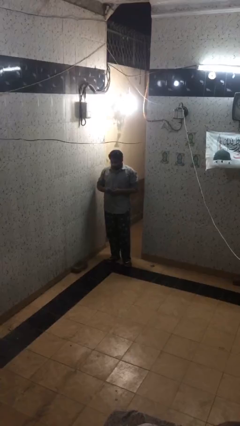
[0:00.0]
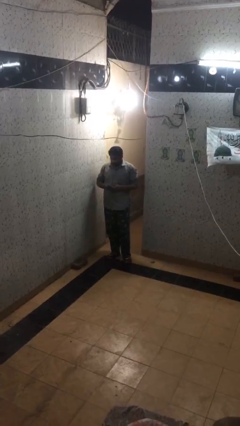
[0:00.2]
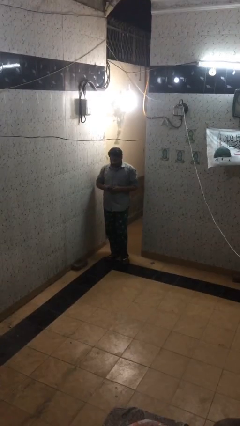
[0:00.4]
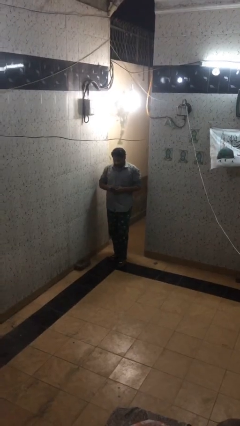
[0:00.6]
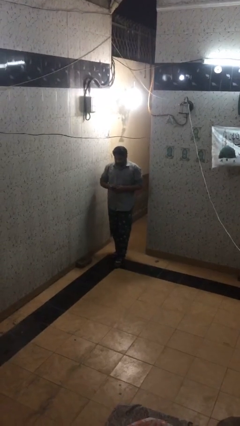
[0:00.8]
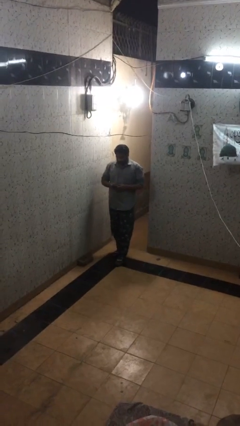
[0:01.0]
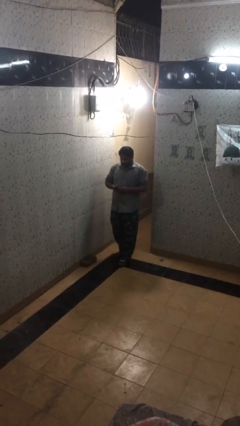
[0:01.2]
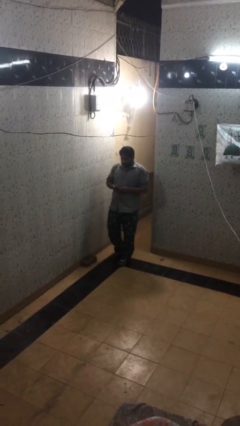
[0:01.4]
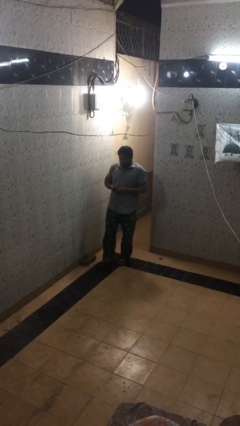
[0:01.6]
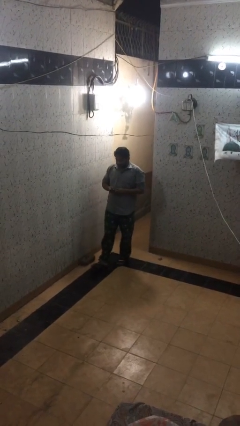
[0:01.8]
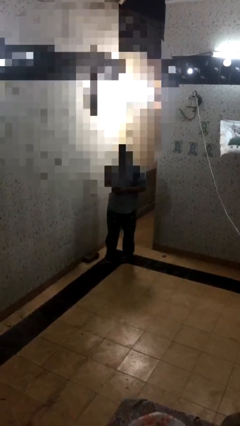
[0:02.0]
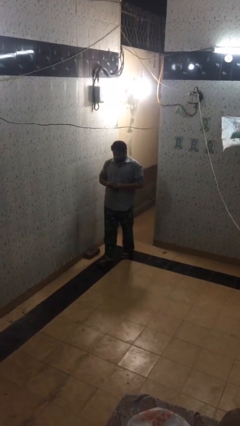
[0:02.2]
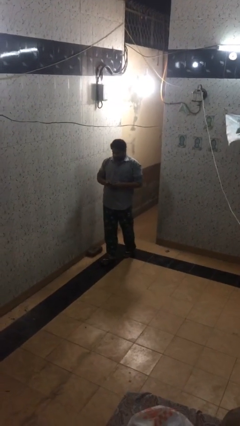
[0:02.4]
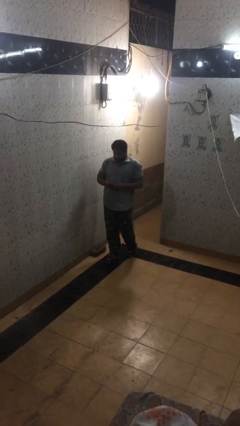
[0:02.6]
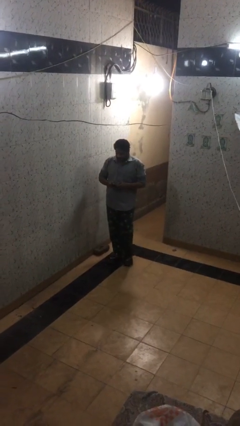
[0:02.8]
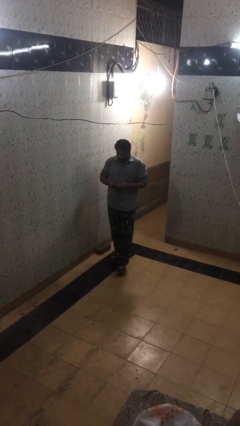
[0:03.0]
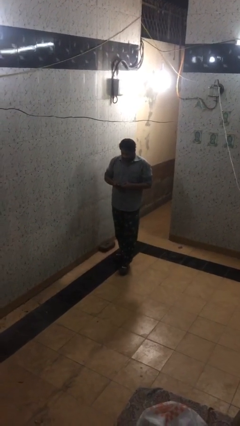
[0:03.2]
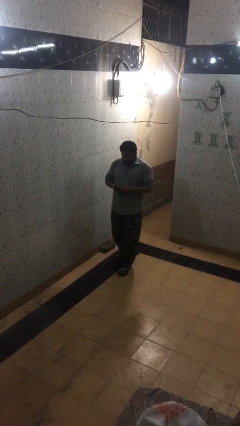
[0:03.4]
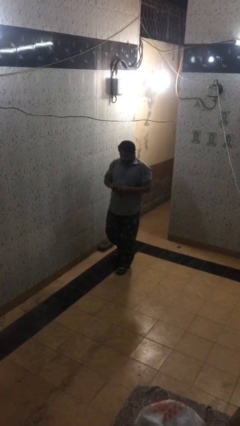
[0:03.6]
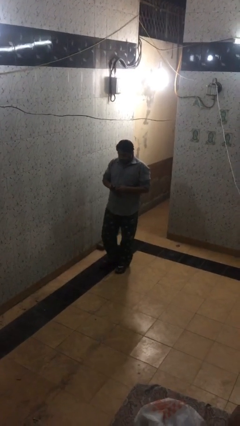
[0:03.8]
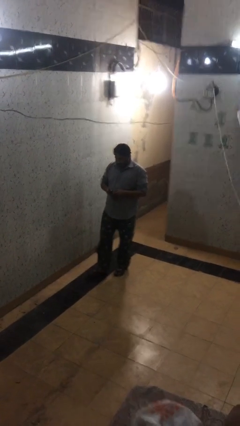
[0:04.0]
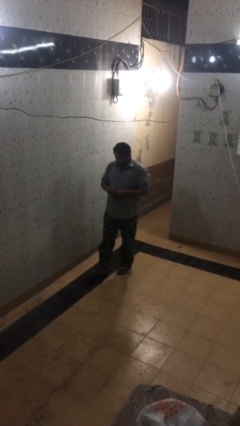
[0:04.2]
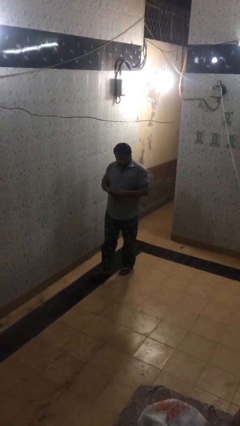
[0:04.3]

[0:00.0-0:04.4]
person texts on phone

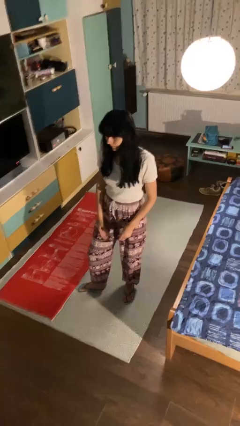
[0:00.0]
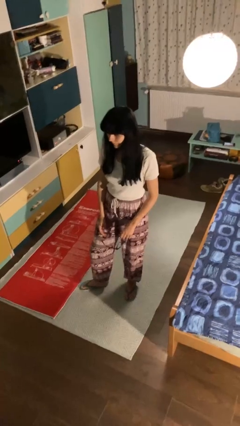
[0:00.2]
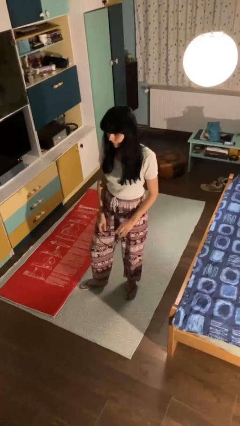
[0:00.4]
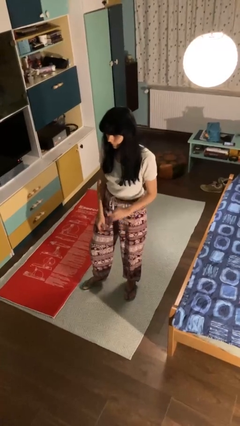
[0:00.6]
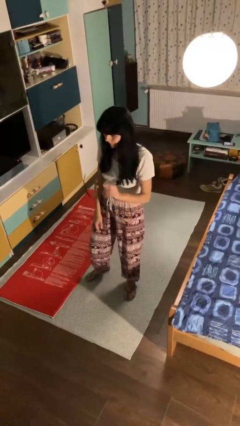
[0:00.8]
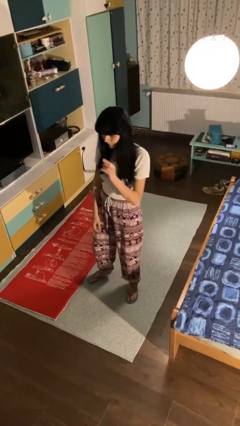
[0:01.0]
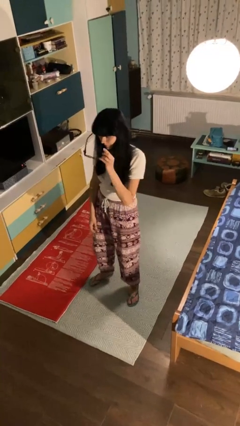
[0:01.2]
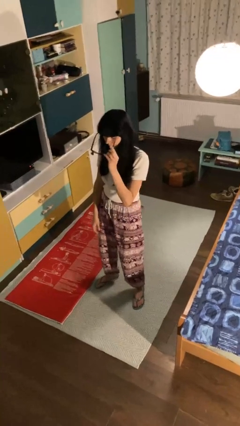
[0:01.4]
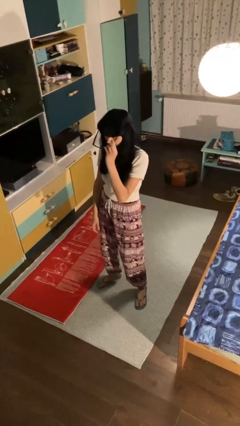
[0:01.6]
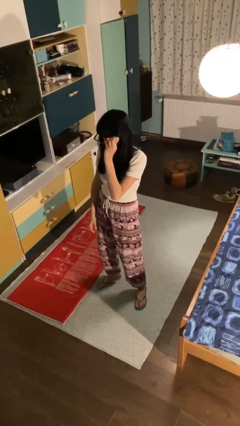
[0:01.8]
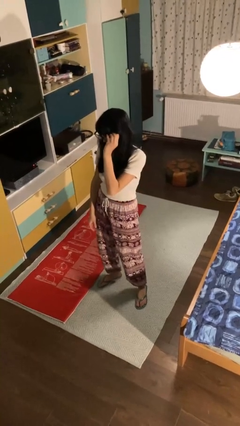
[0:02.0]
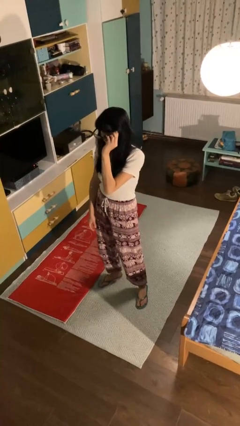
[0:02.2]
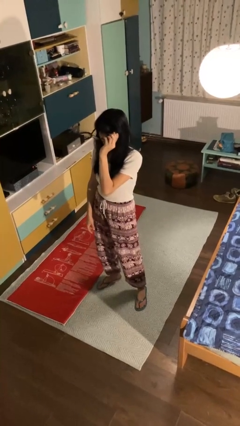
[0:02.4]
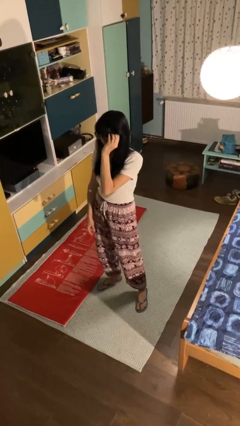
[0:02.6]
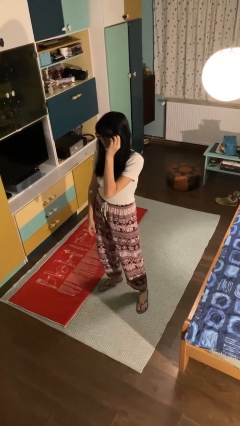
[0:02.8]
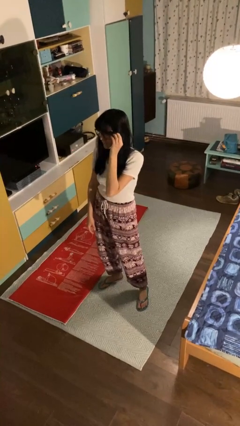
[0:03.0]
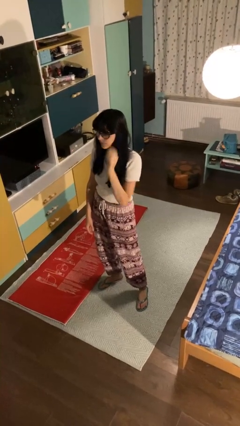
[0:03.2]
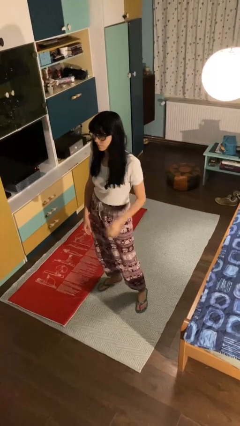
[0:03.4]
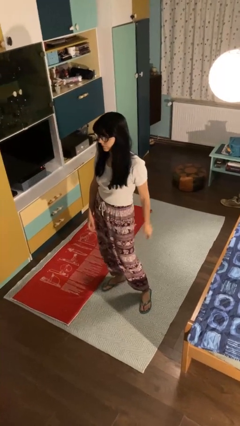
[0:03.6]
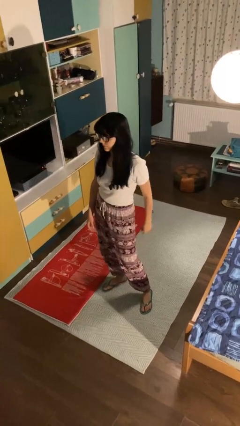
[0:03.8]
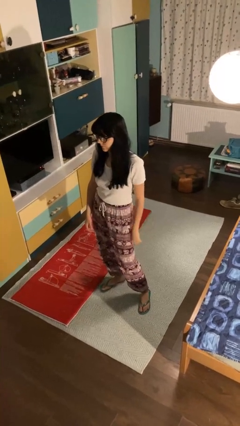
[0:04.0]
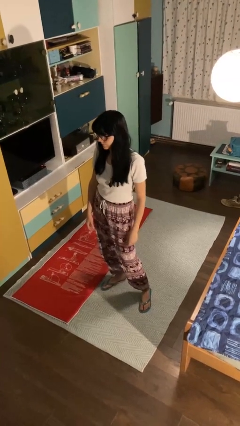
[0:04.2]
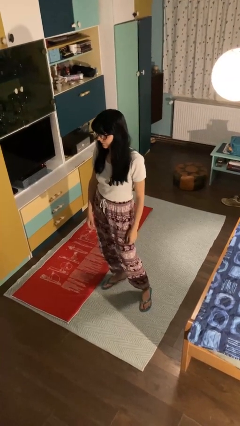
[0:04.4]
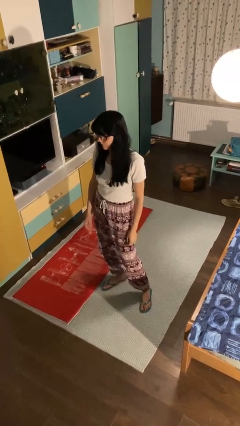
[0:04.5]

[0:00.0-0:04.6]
person puts on glasses

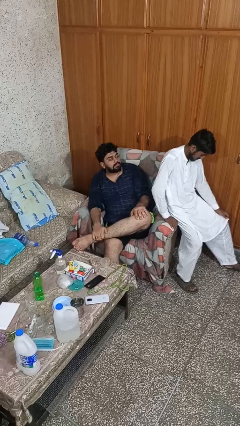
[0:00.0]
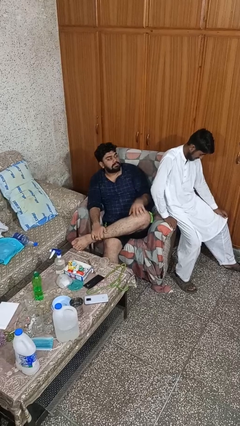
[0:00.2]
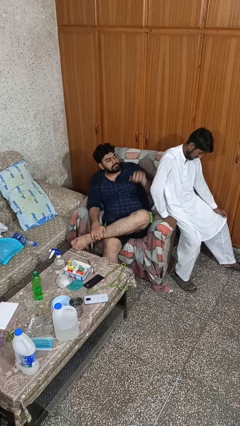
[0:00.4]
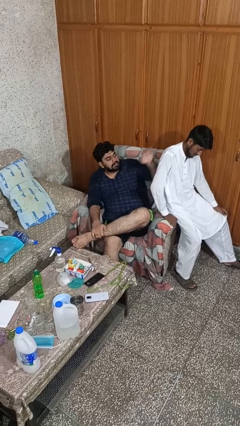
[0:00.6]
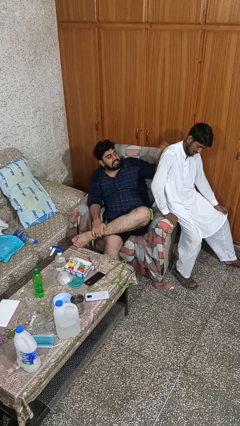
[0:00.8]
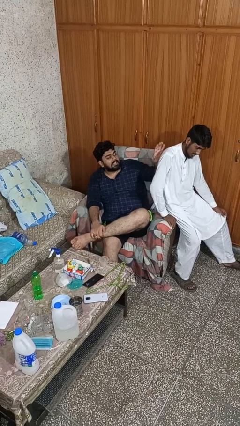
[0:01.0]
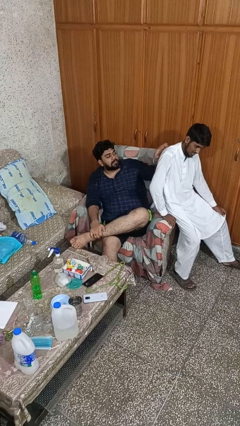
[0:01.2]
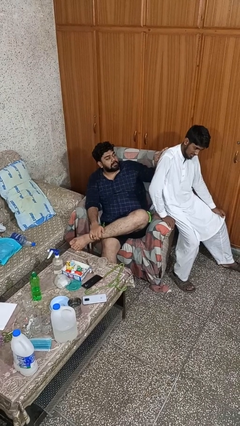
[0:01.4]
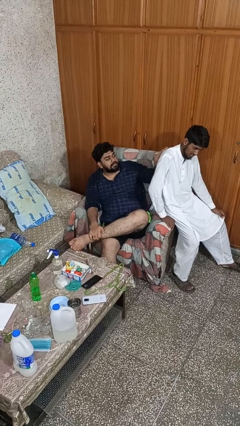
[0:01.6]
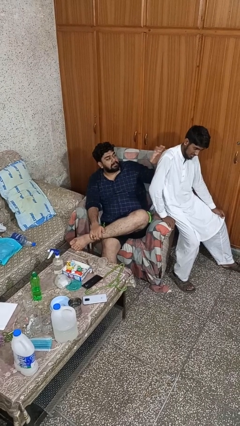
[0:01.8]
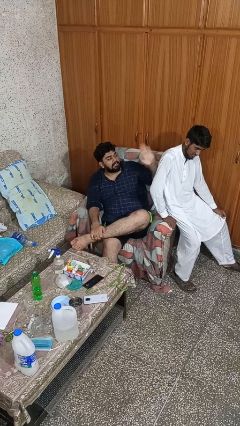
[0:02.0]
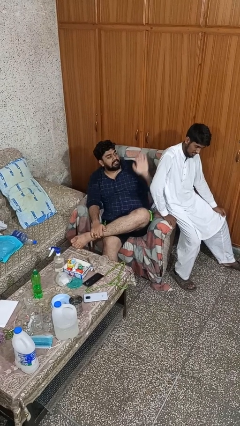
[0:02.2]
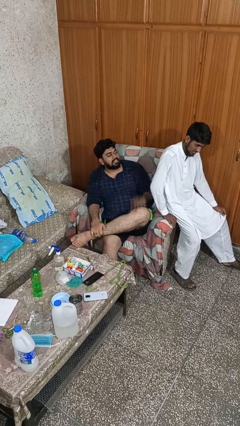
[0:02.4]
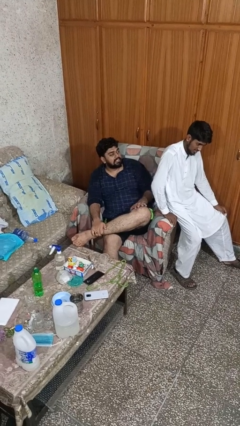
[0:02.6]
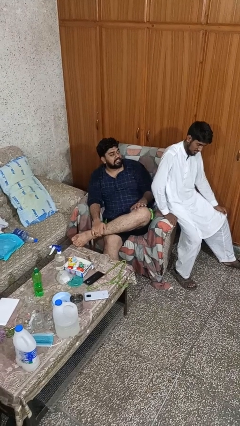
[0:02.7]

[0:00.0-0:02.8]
person pounds shoulders of person

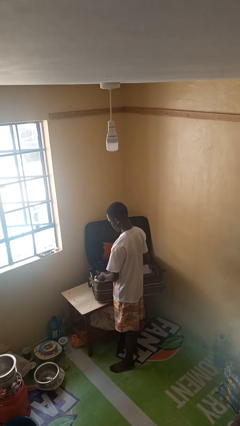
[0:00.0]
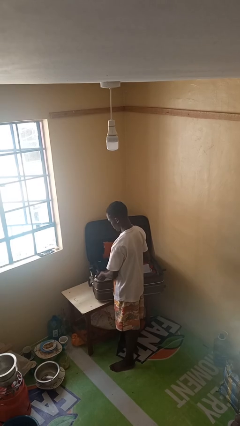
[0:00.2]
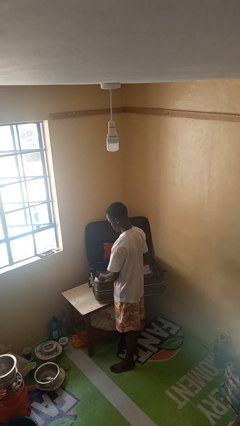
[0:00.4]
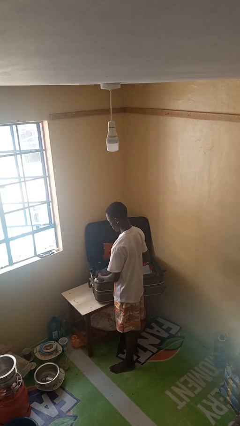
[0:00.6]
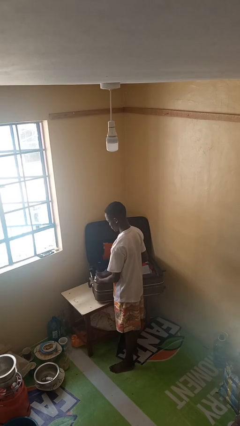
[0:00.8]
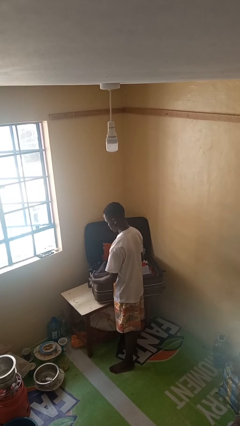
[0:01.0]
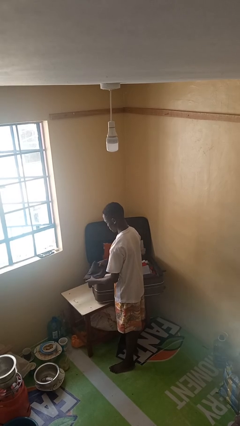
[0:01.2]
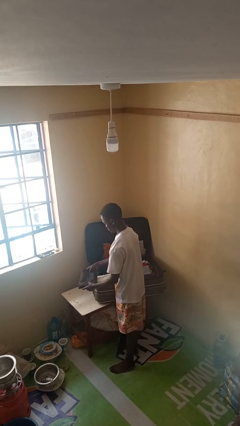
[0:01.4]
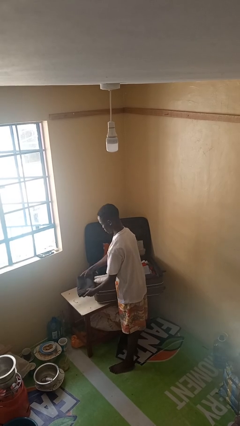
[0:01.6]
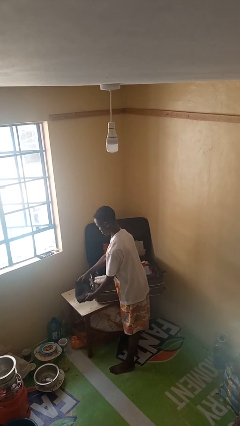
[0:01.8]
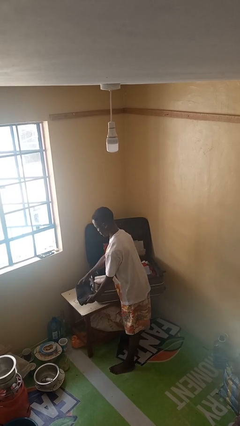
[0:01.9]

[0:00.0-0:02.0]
person unloads clothes from suitcase

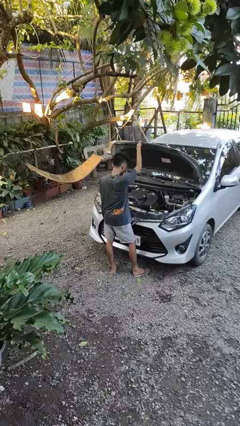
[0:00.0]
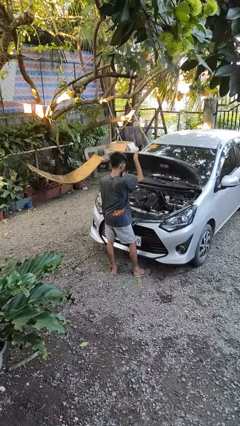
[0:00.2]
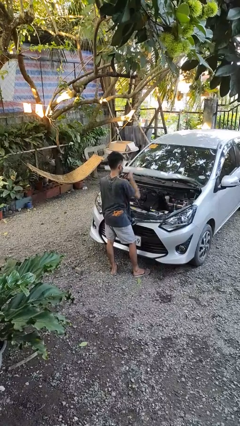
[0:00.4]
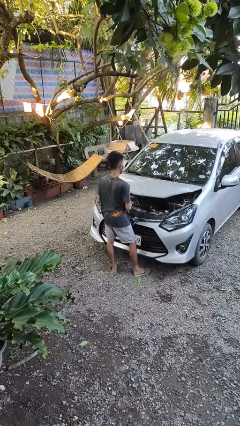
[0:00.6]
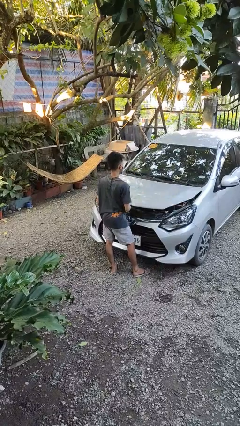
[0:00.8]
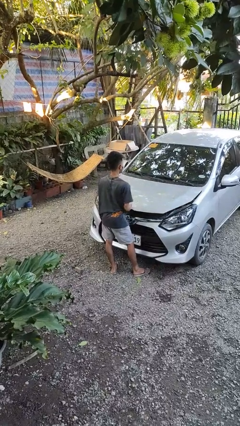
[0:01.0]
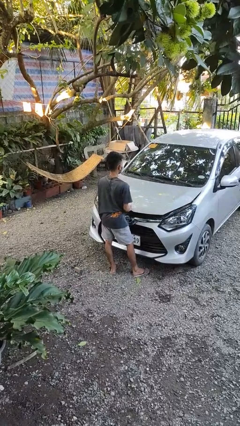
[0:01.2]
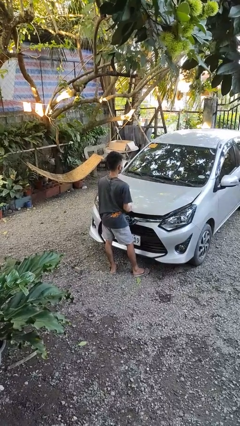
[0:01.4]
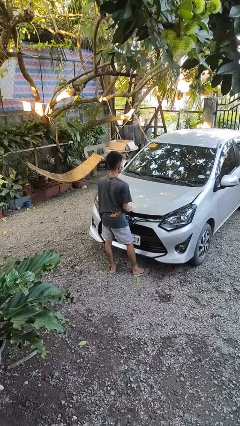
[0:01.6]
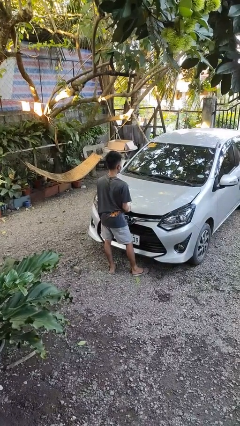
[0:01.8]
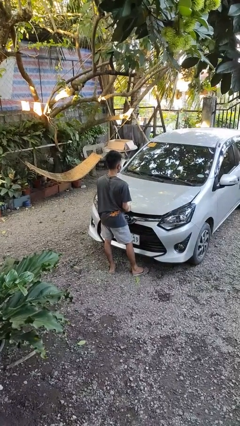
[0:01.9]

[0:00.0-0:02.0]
person closes car hood

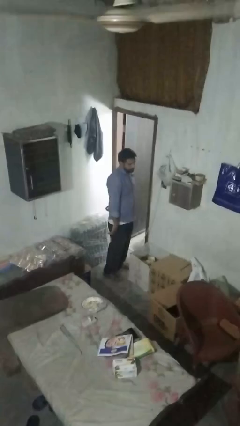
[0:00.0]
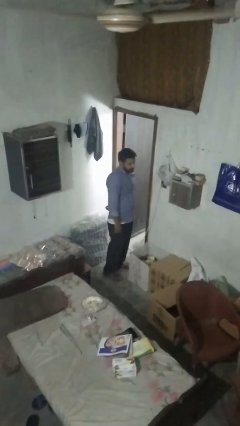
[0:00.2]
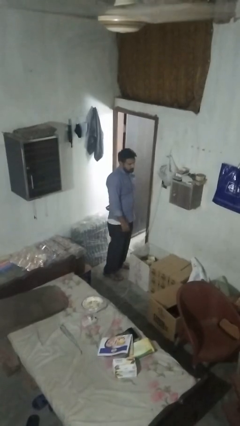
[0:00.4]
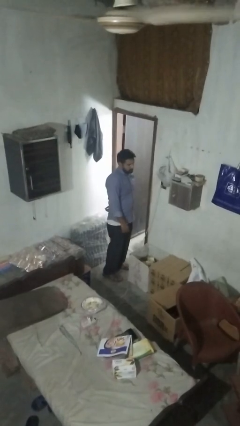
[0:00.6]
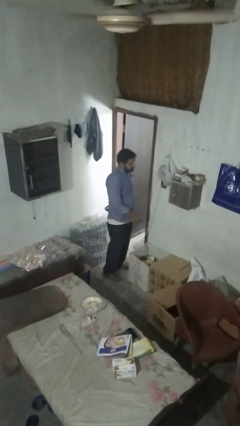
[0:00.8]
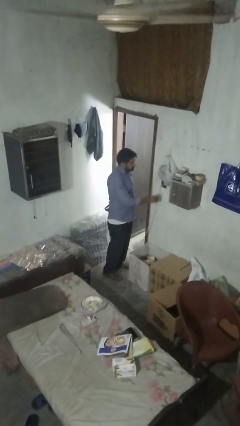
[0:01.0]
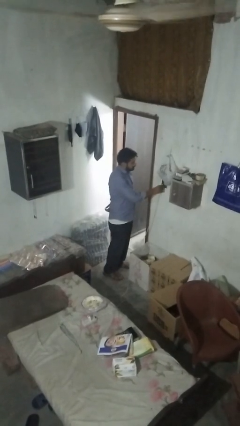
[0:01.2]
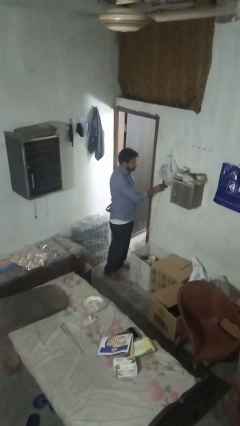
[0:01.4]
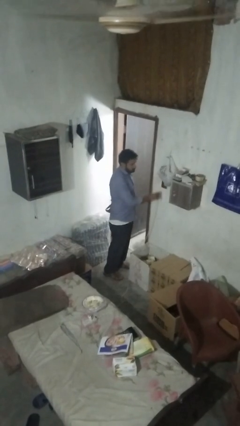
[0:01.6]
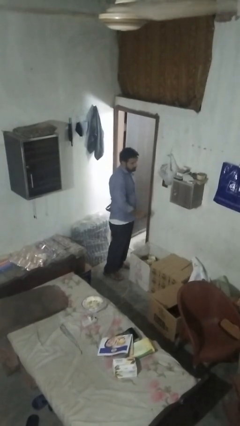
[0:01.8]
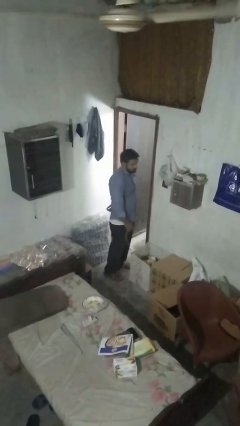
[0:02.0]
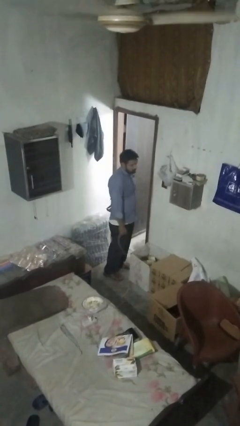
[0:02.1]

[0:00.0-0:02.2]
person unplugs from electrical socket
